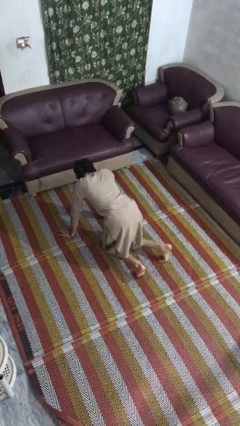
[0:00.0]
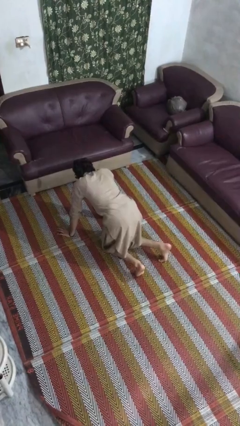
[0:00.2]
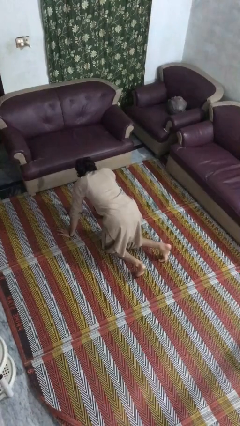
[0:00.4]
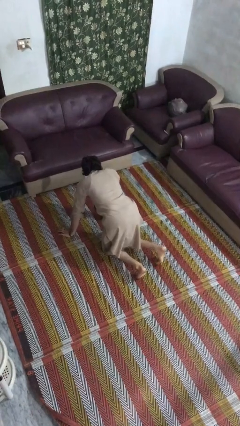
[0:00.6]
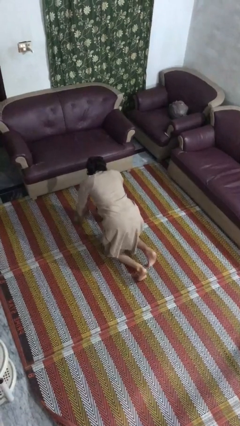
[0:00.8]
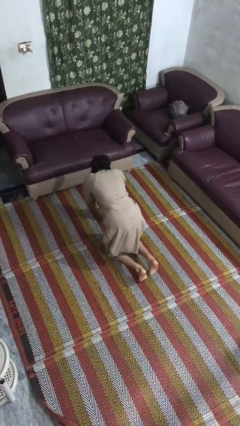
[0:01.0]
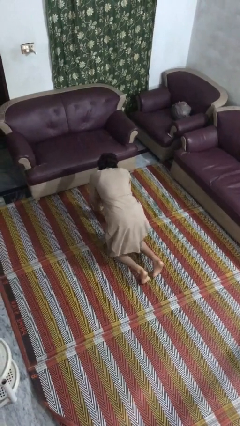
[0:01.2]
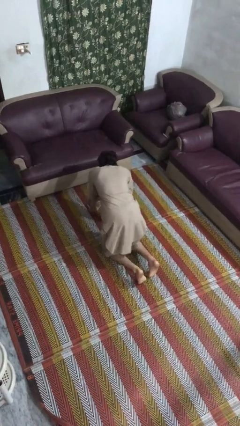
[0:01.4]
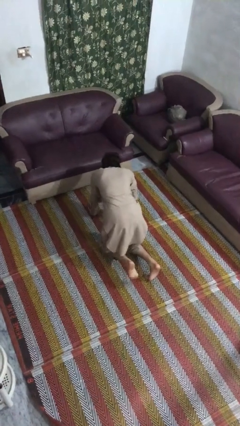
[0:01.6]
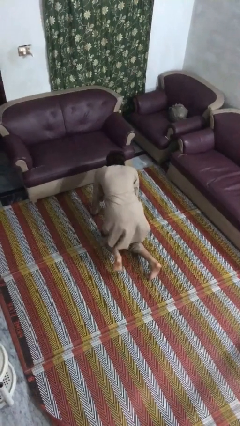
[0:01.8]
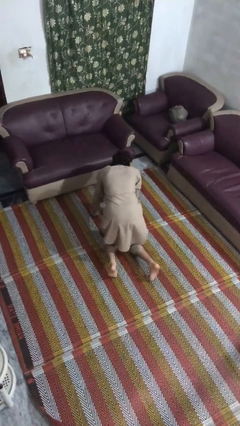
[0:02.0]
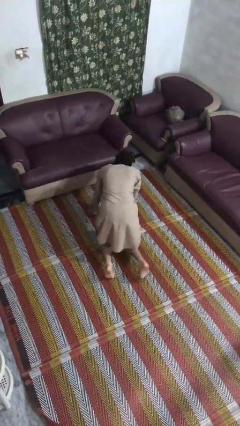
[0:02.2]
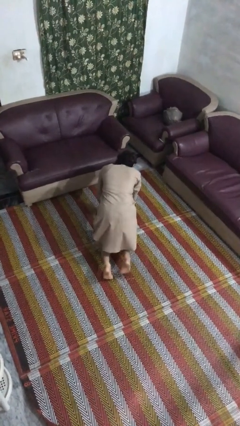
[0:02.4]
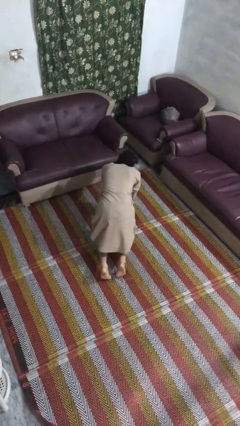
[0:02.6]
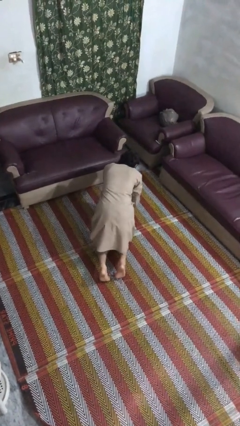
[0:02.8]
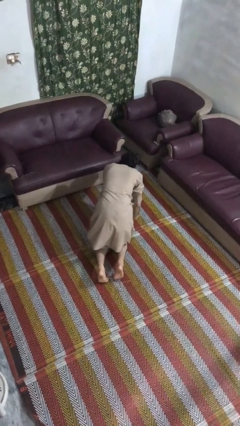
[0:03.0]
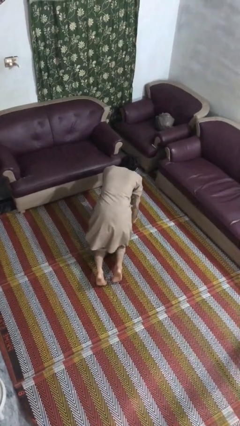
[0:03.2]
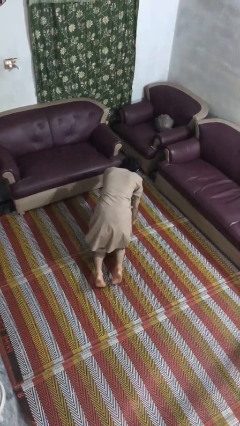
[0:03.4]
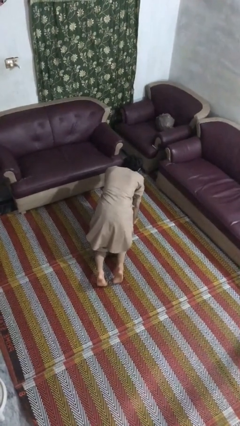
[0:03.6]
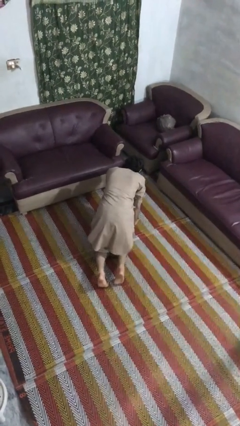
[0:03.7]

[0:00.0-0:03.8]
person crawls

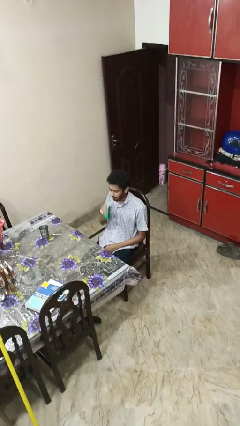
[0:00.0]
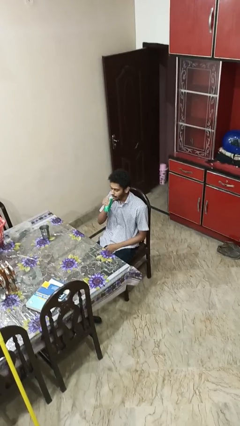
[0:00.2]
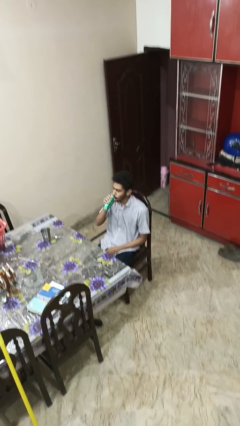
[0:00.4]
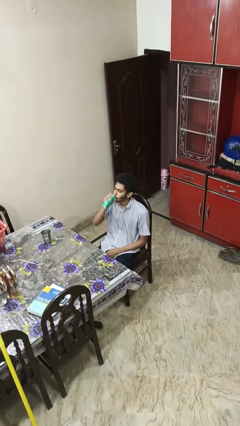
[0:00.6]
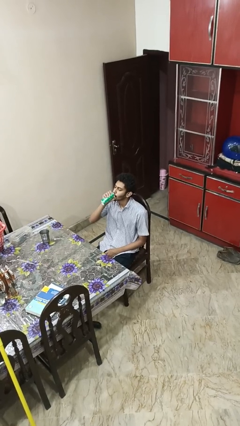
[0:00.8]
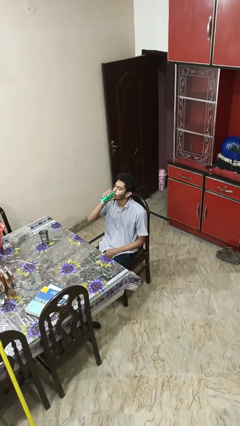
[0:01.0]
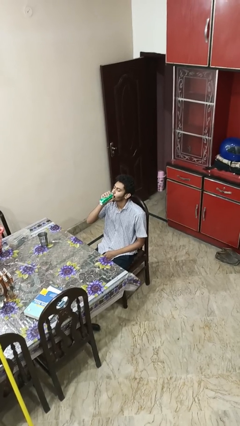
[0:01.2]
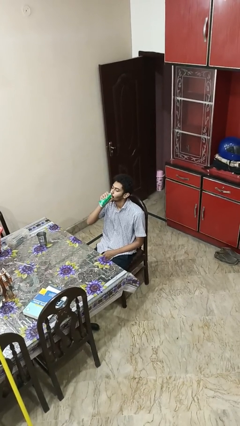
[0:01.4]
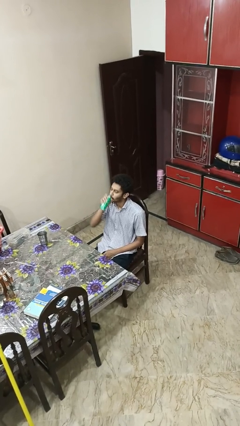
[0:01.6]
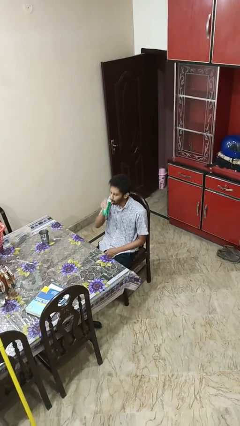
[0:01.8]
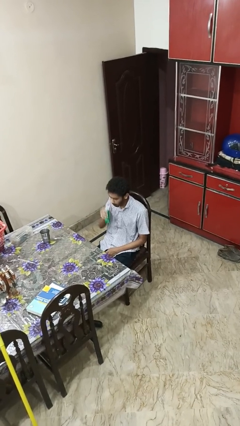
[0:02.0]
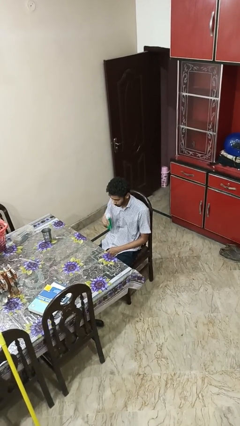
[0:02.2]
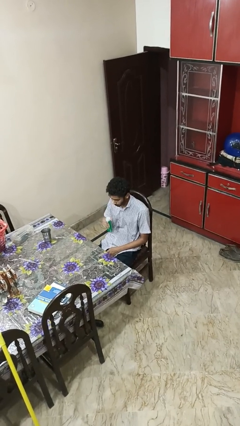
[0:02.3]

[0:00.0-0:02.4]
person drinks from beverage can

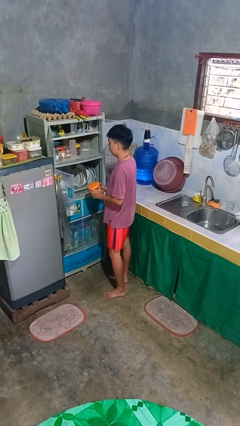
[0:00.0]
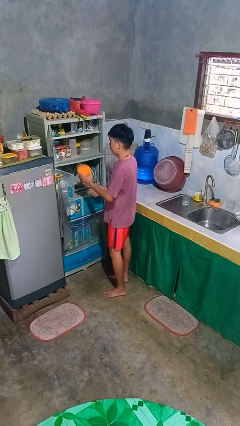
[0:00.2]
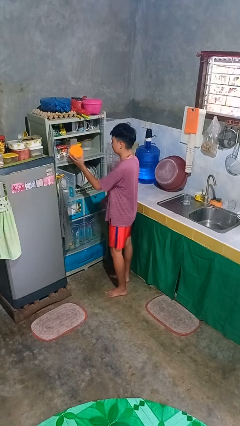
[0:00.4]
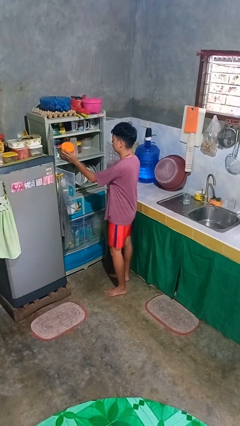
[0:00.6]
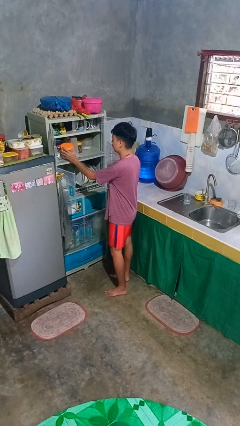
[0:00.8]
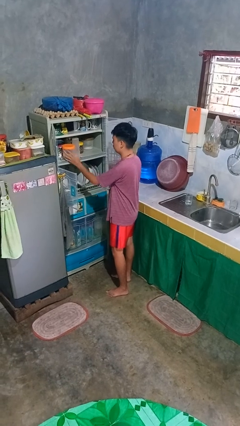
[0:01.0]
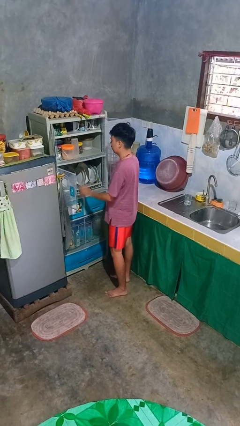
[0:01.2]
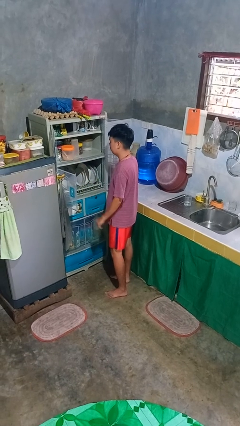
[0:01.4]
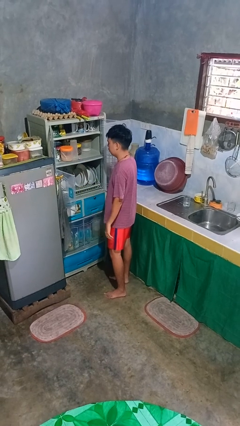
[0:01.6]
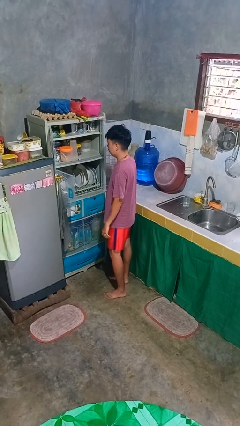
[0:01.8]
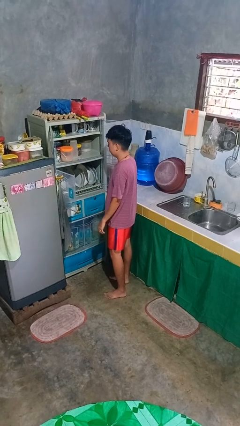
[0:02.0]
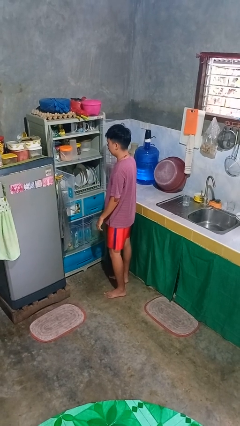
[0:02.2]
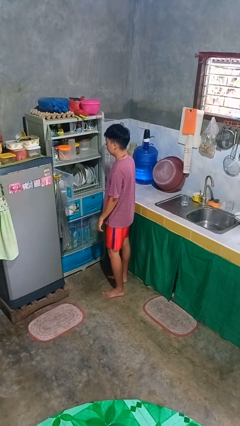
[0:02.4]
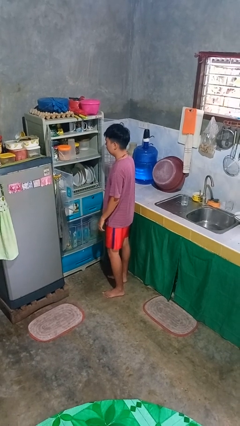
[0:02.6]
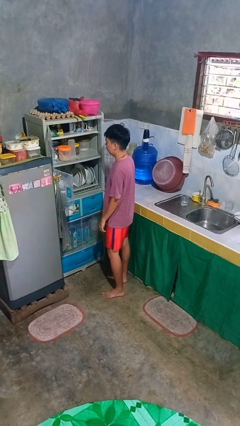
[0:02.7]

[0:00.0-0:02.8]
person puts object in cabinet

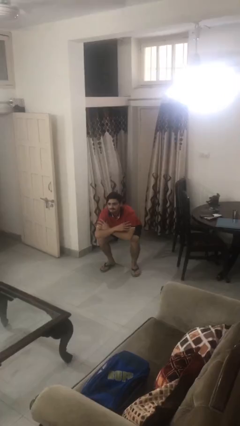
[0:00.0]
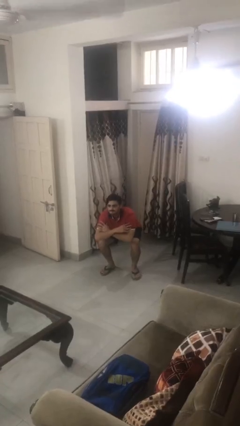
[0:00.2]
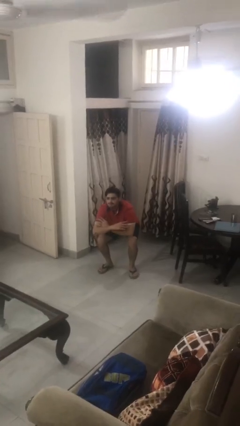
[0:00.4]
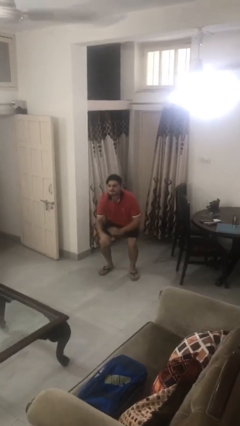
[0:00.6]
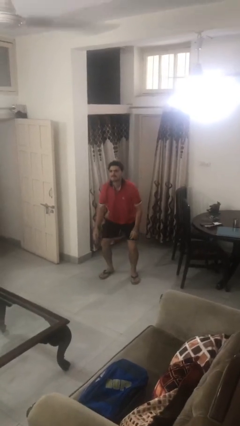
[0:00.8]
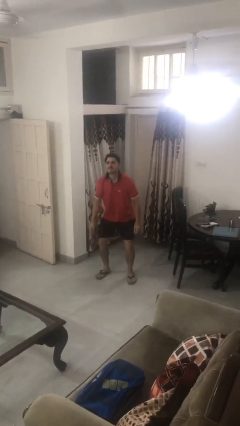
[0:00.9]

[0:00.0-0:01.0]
person stands up

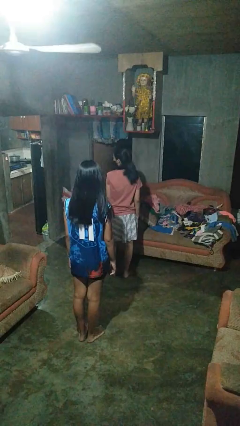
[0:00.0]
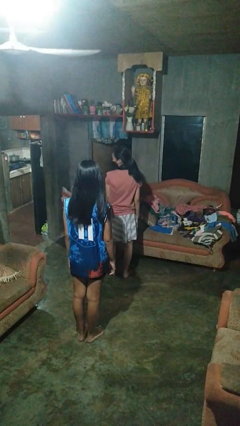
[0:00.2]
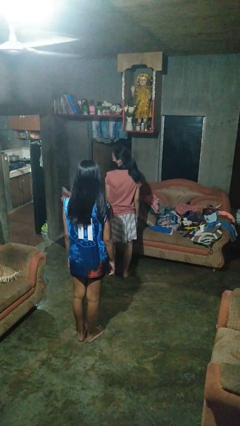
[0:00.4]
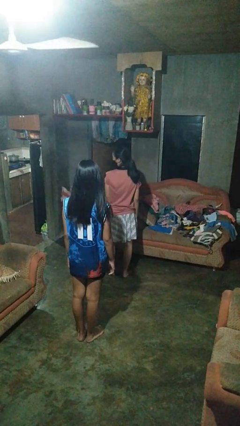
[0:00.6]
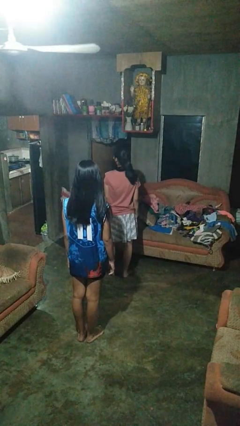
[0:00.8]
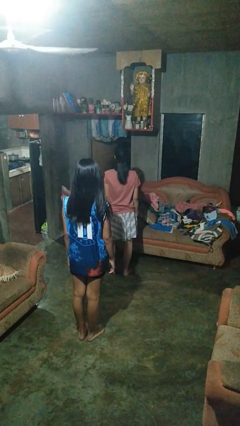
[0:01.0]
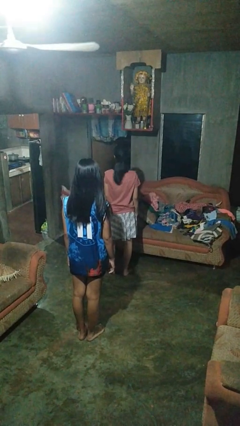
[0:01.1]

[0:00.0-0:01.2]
person looks over shoulder

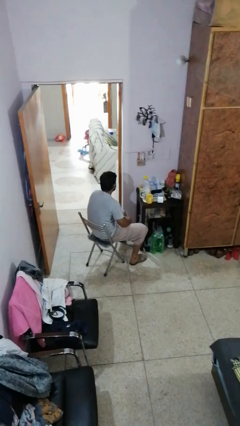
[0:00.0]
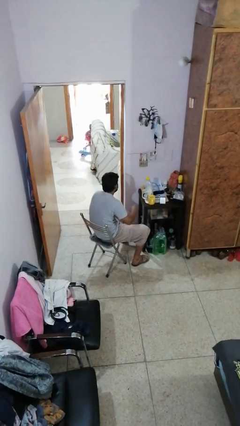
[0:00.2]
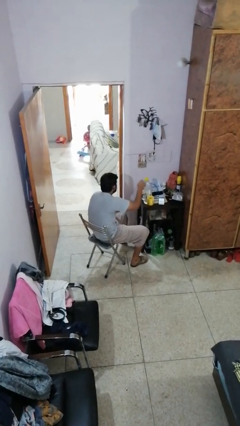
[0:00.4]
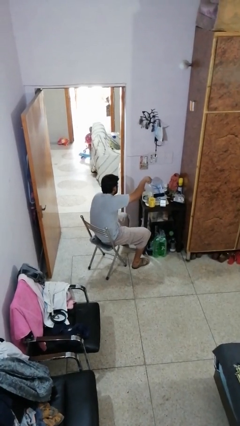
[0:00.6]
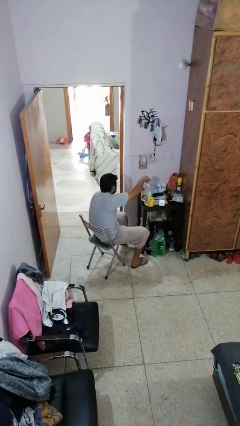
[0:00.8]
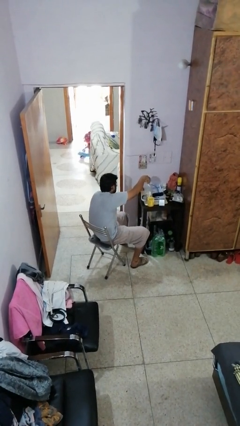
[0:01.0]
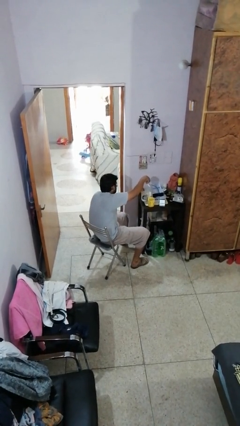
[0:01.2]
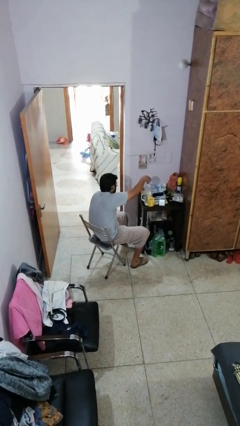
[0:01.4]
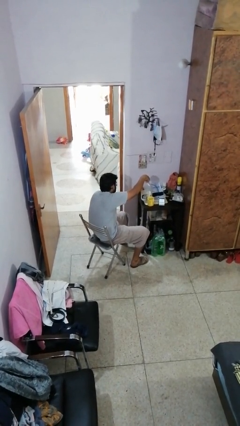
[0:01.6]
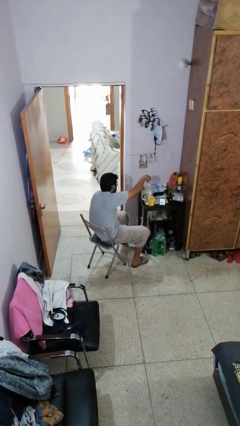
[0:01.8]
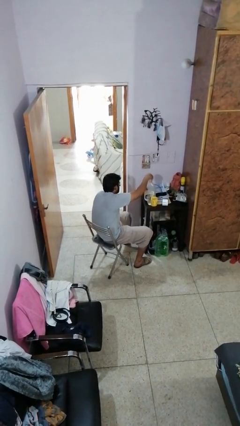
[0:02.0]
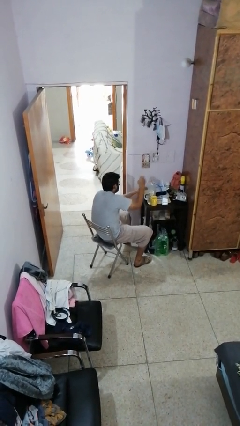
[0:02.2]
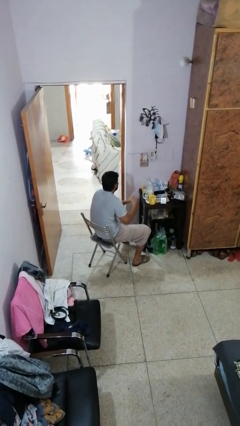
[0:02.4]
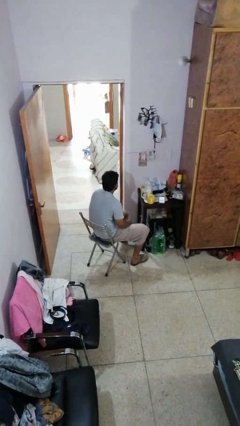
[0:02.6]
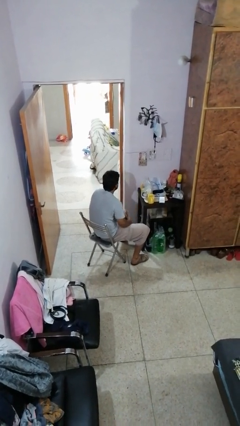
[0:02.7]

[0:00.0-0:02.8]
person unscrews lid from bottle

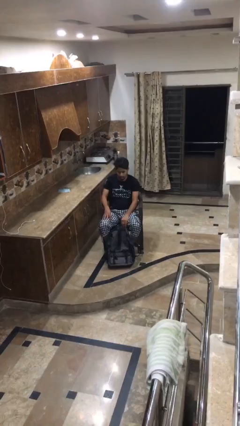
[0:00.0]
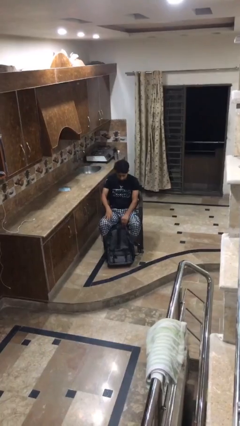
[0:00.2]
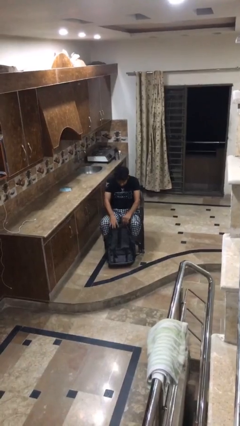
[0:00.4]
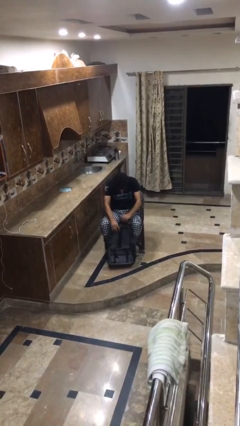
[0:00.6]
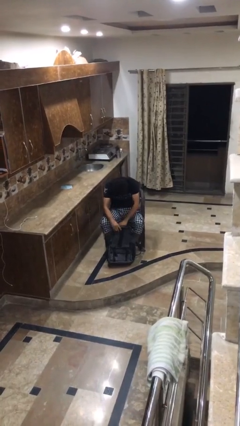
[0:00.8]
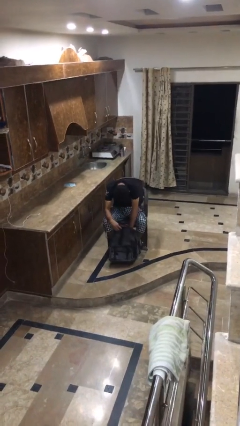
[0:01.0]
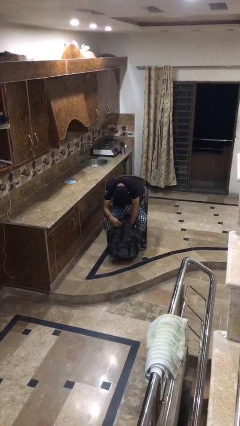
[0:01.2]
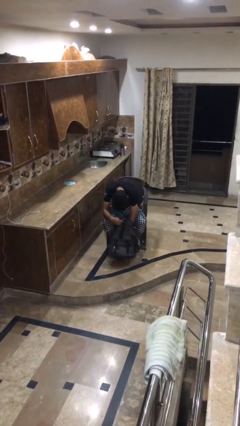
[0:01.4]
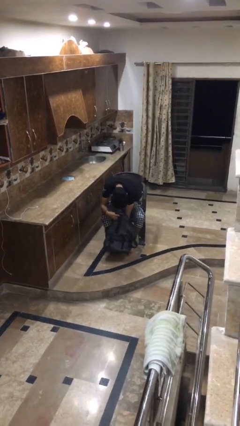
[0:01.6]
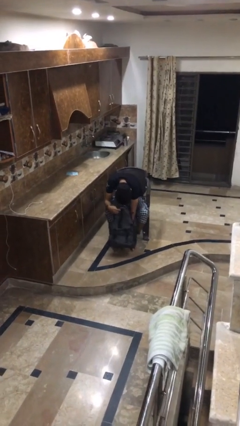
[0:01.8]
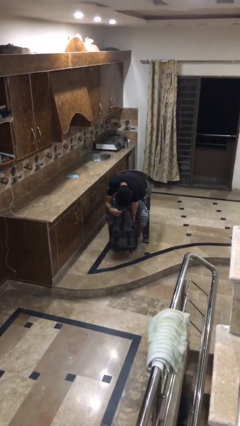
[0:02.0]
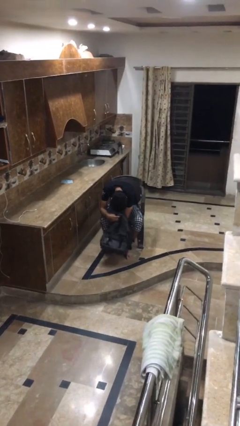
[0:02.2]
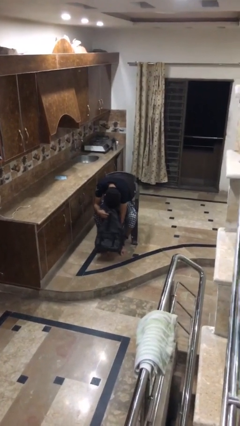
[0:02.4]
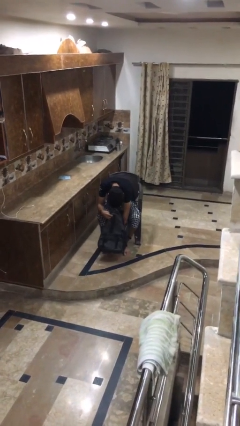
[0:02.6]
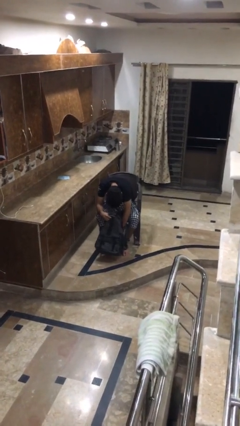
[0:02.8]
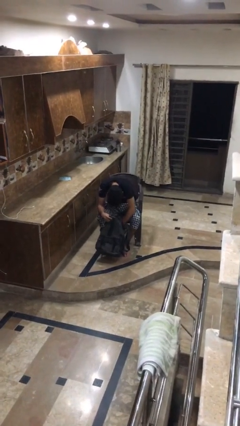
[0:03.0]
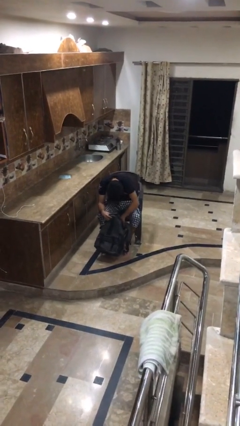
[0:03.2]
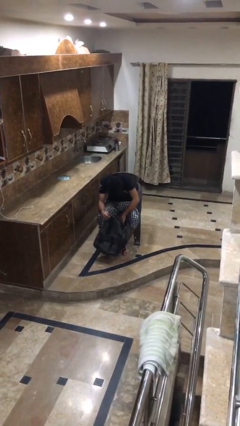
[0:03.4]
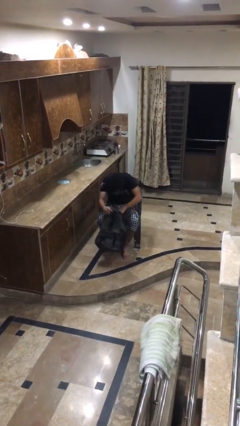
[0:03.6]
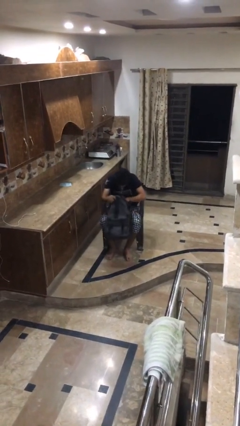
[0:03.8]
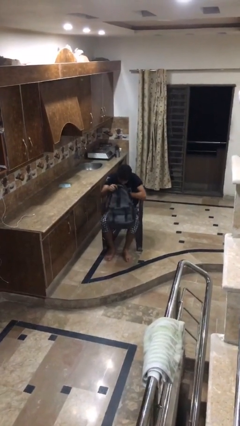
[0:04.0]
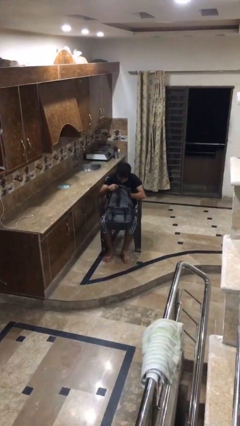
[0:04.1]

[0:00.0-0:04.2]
person searches in bag
